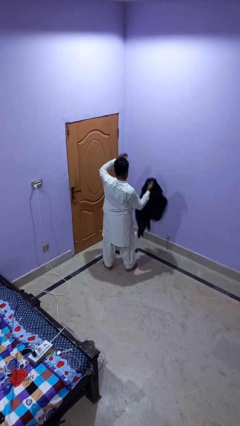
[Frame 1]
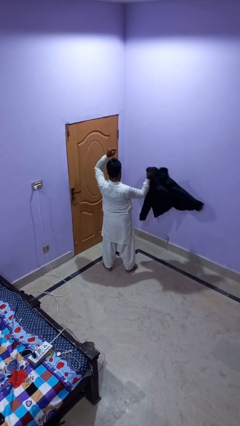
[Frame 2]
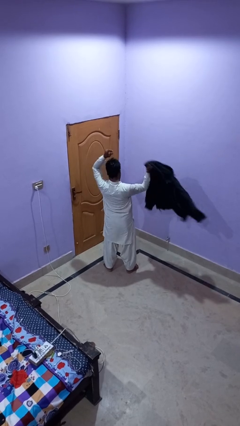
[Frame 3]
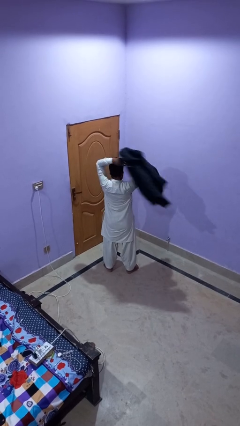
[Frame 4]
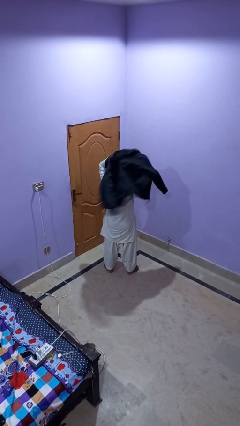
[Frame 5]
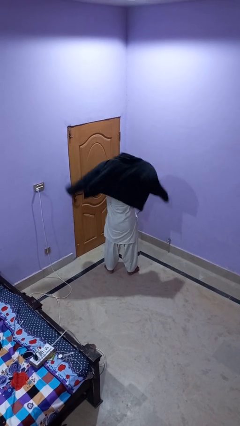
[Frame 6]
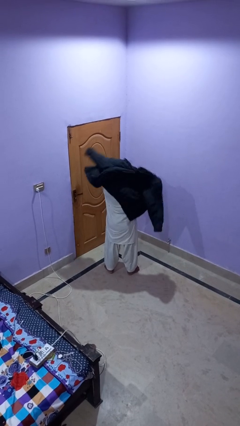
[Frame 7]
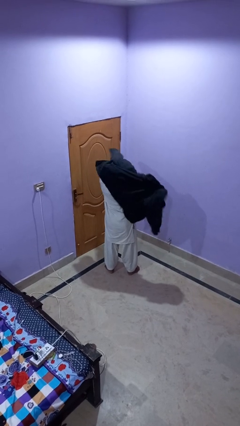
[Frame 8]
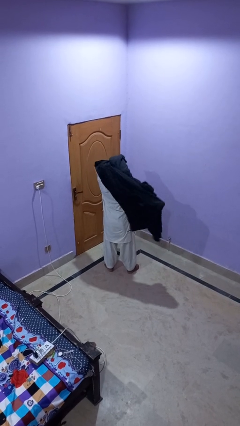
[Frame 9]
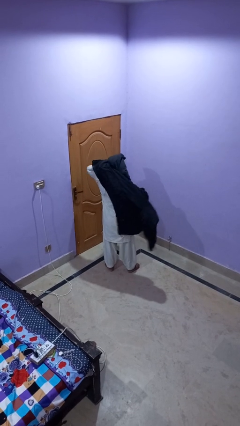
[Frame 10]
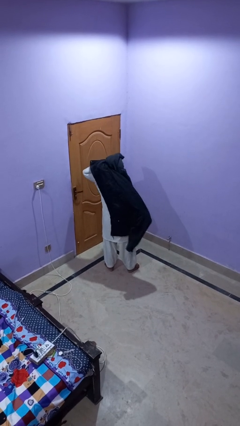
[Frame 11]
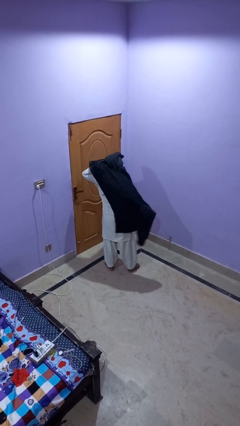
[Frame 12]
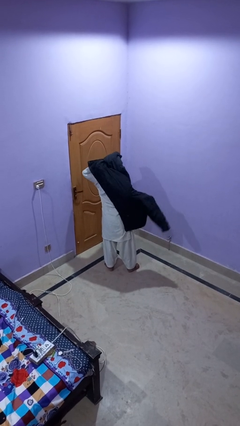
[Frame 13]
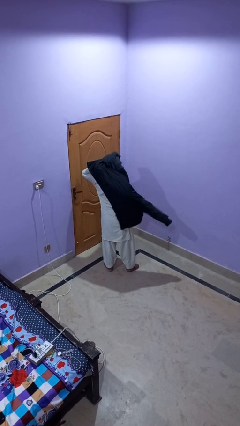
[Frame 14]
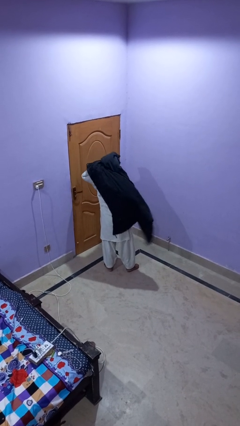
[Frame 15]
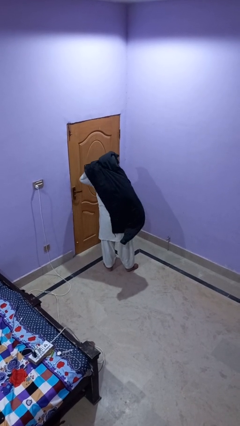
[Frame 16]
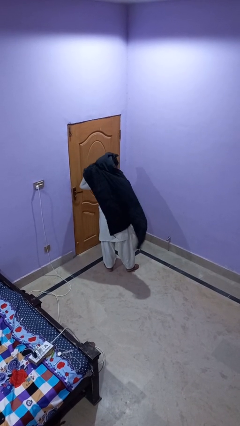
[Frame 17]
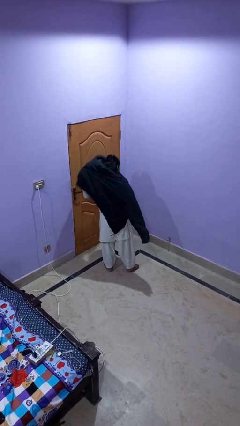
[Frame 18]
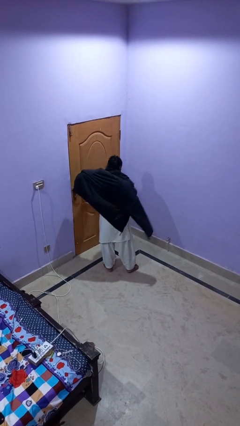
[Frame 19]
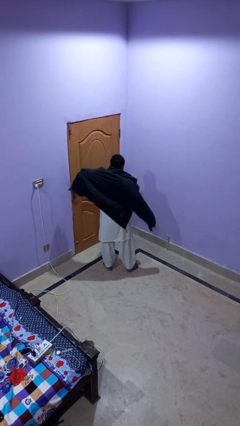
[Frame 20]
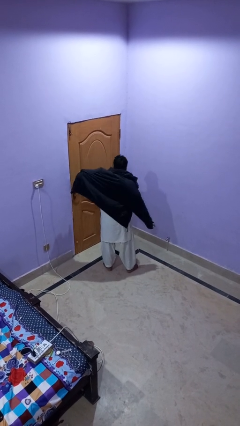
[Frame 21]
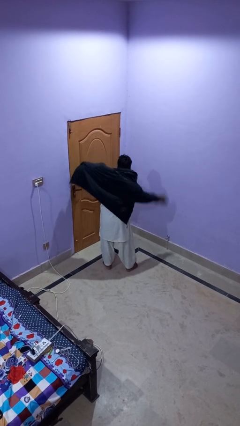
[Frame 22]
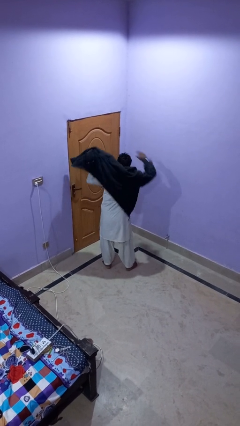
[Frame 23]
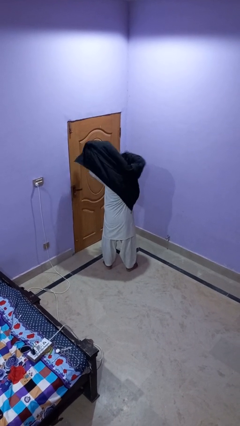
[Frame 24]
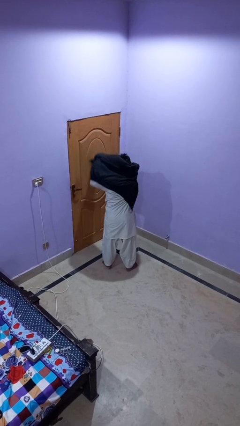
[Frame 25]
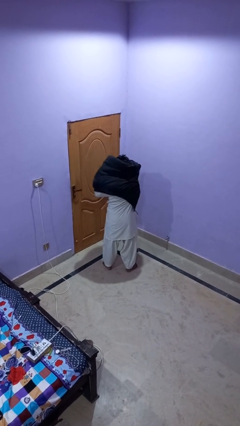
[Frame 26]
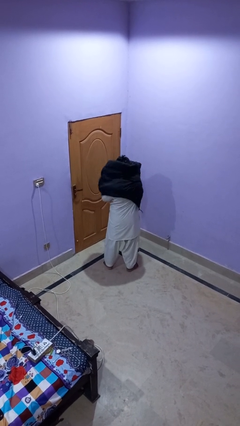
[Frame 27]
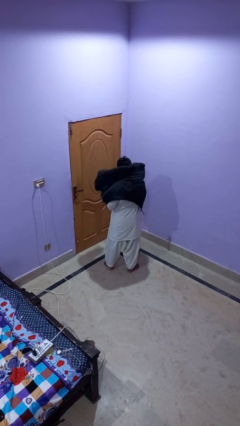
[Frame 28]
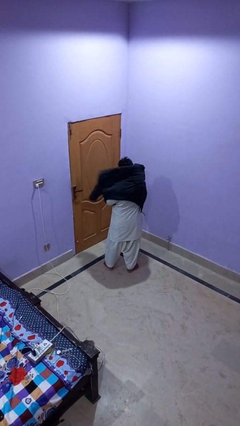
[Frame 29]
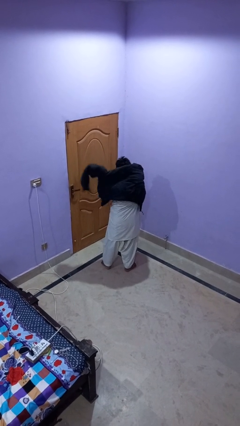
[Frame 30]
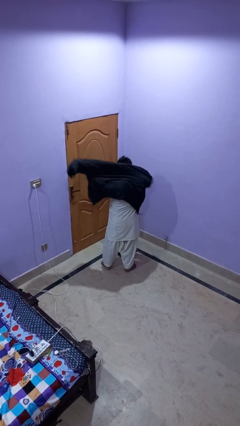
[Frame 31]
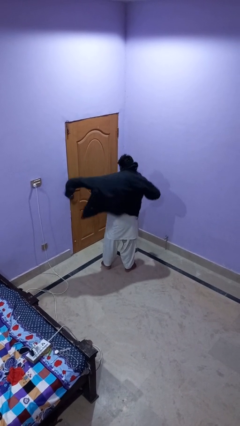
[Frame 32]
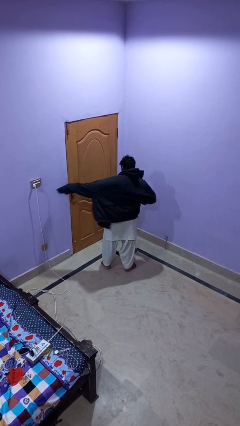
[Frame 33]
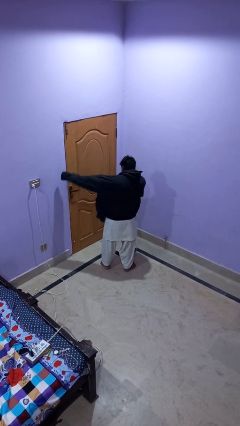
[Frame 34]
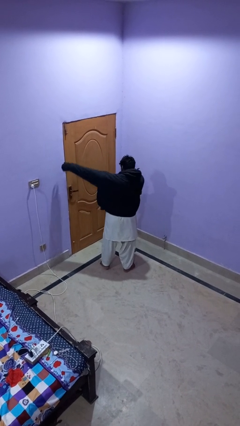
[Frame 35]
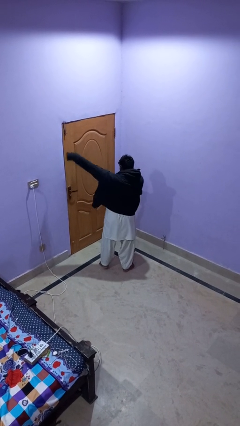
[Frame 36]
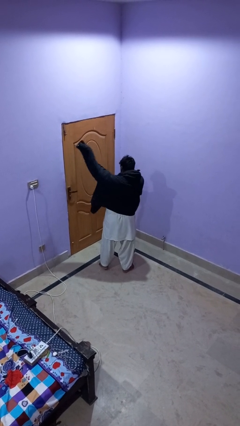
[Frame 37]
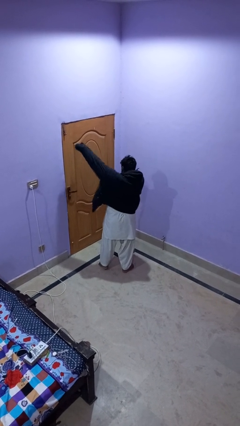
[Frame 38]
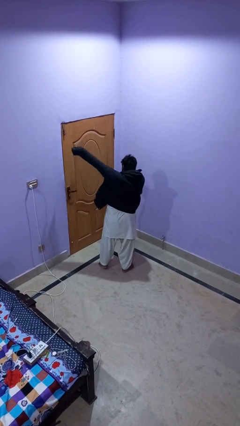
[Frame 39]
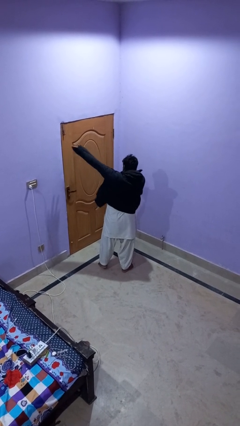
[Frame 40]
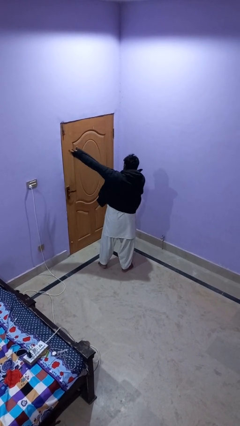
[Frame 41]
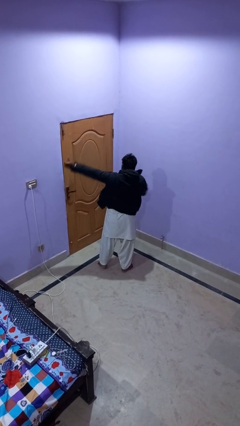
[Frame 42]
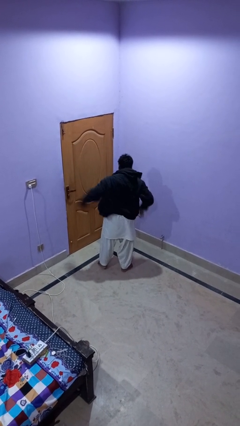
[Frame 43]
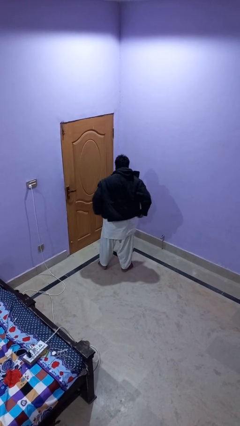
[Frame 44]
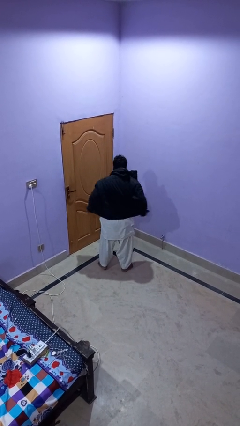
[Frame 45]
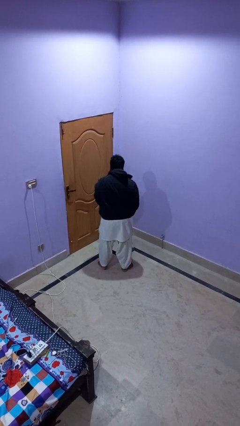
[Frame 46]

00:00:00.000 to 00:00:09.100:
person puts on jacket

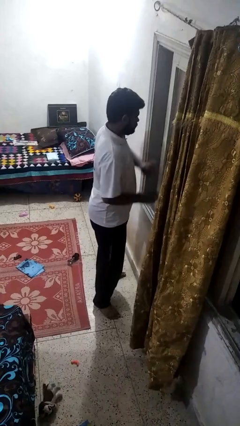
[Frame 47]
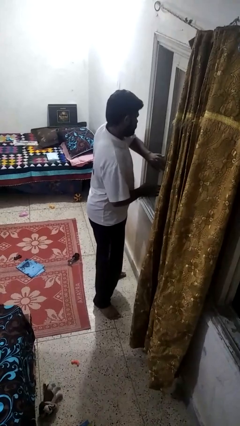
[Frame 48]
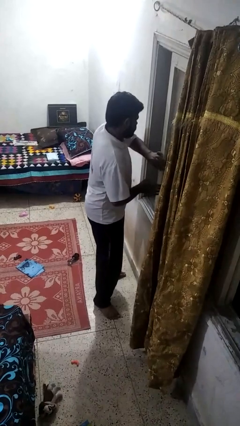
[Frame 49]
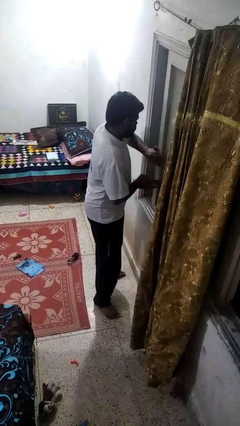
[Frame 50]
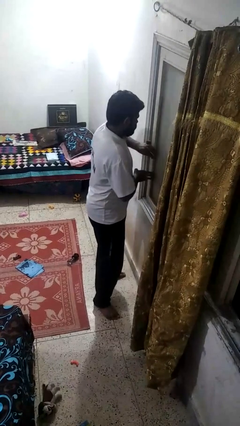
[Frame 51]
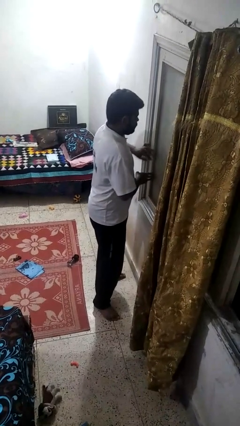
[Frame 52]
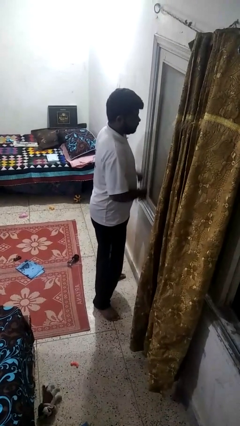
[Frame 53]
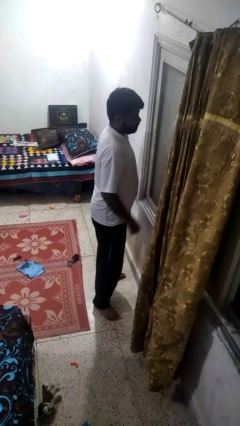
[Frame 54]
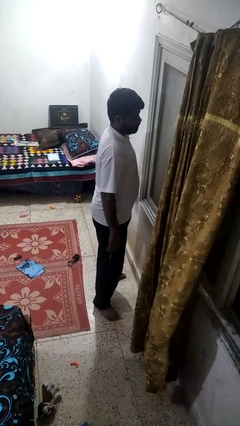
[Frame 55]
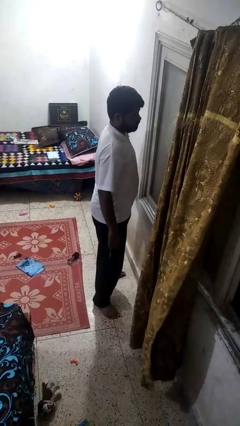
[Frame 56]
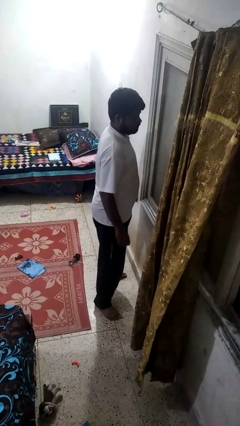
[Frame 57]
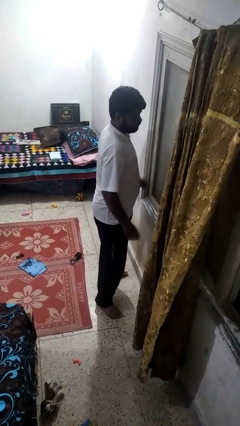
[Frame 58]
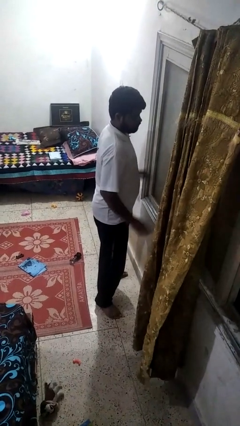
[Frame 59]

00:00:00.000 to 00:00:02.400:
person closes sliding door

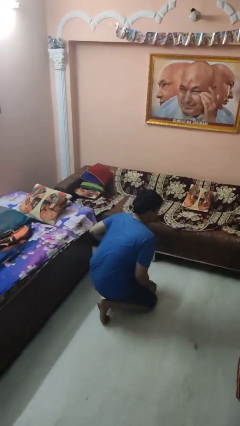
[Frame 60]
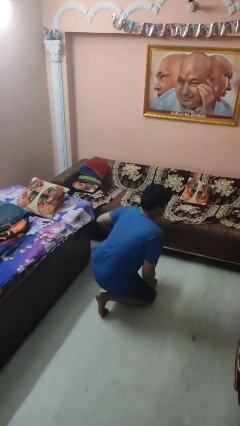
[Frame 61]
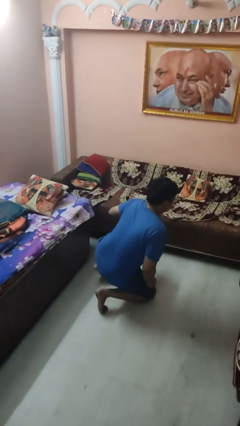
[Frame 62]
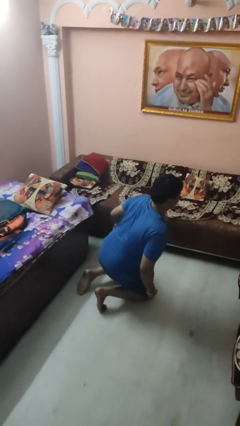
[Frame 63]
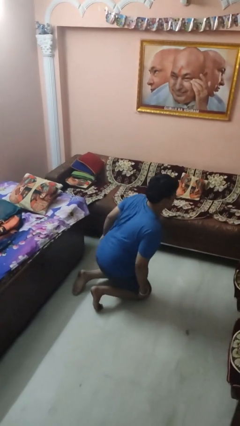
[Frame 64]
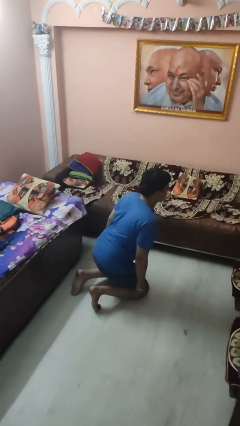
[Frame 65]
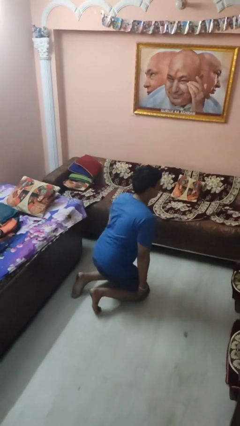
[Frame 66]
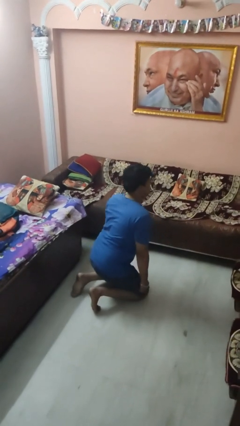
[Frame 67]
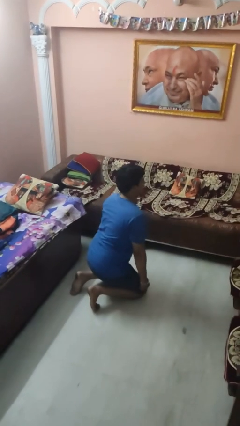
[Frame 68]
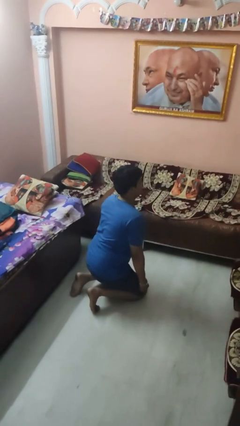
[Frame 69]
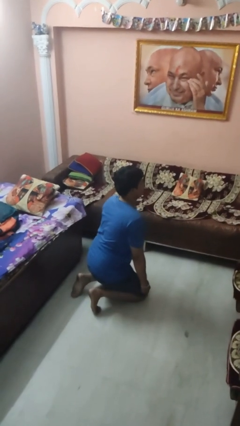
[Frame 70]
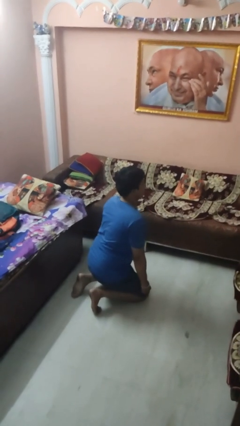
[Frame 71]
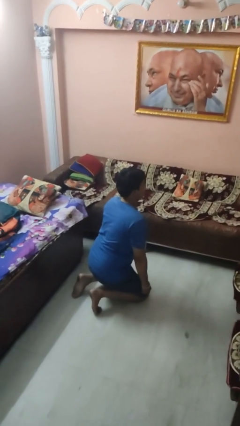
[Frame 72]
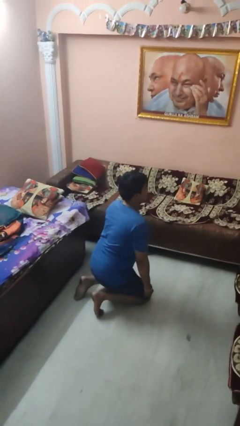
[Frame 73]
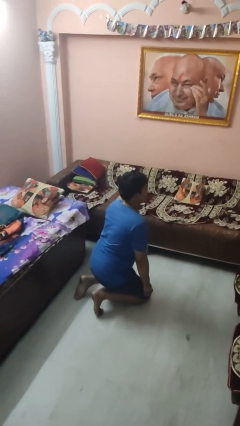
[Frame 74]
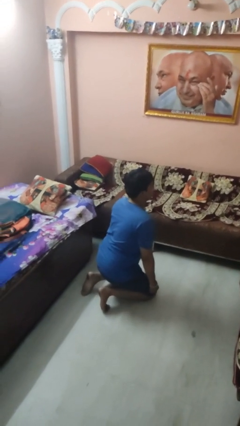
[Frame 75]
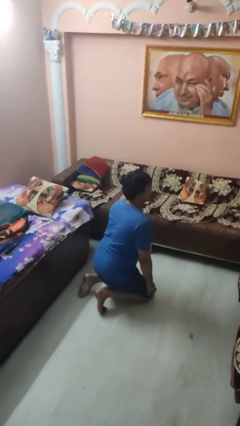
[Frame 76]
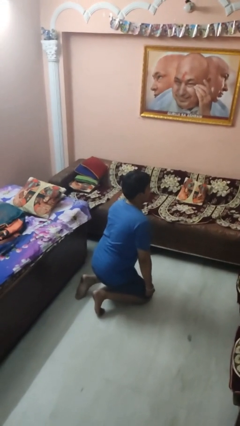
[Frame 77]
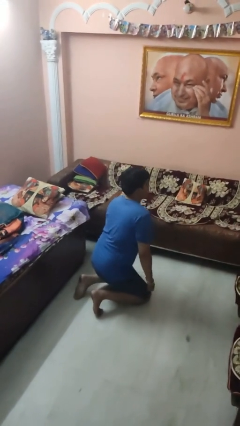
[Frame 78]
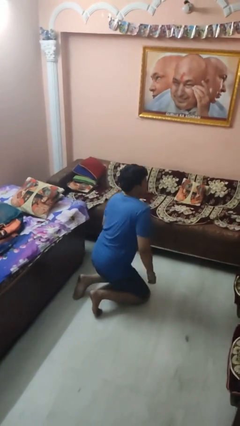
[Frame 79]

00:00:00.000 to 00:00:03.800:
person kneels

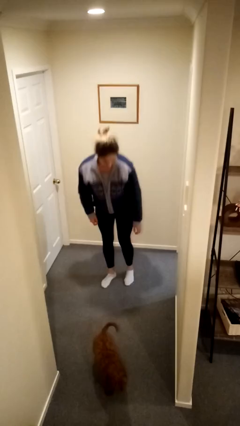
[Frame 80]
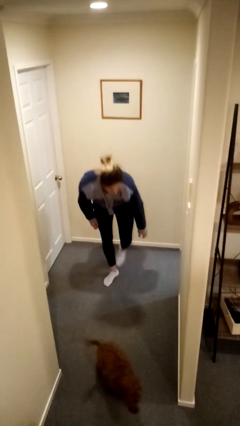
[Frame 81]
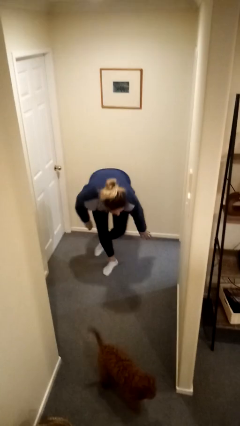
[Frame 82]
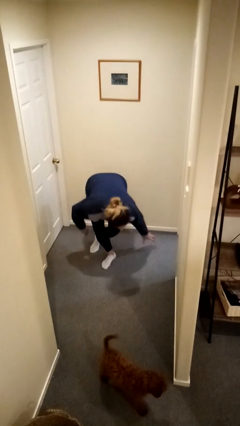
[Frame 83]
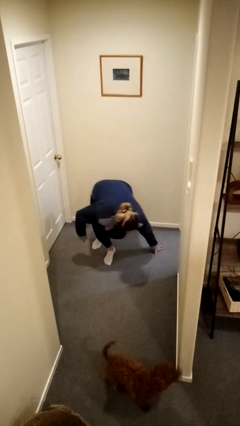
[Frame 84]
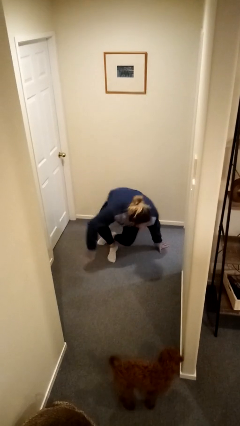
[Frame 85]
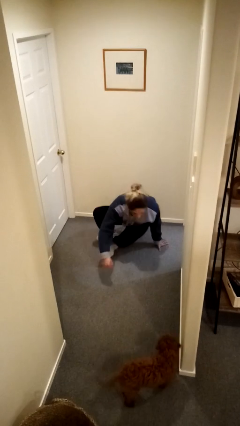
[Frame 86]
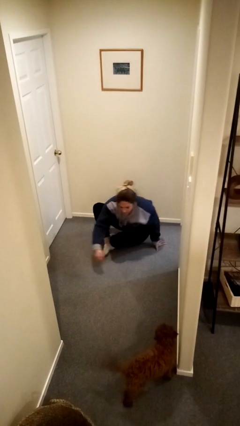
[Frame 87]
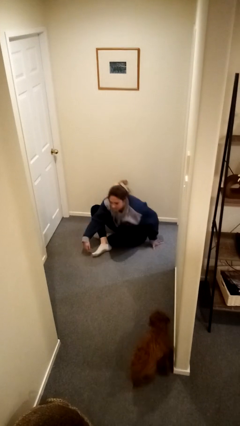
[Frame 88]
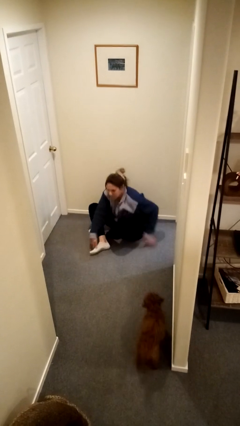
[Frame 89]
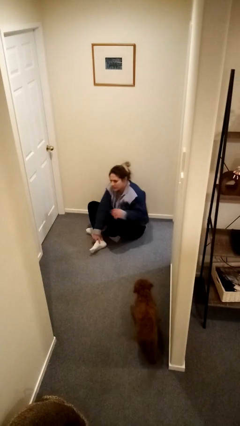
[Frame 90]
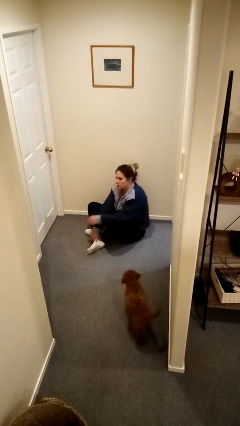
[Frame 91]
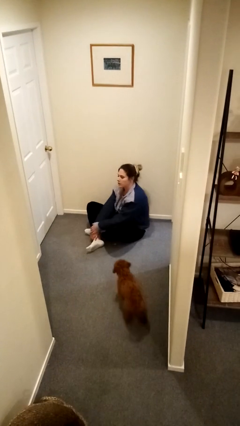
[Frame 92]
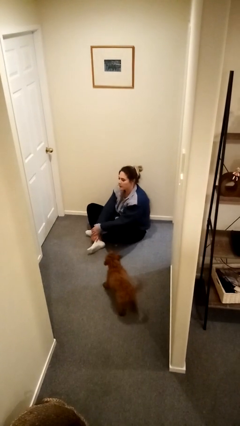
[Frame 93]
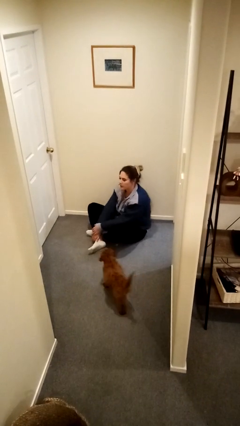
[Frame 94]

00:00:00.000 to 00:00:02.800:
person sits crisscross

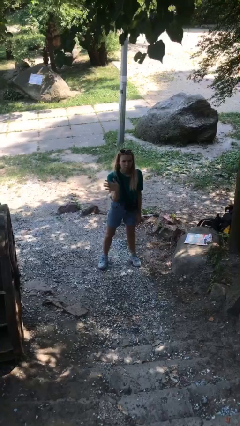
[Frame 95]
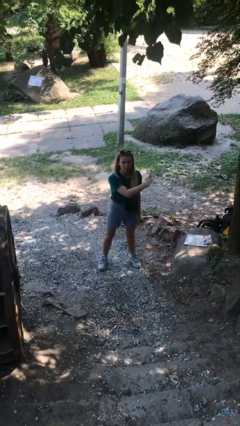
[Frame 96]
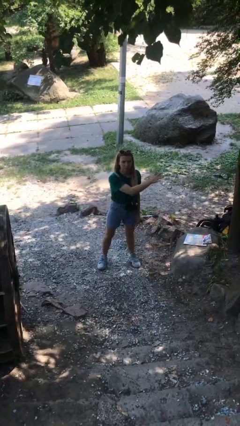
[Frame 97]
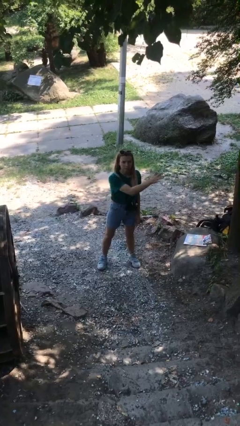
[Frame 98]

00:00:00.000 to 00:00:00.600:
person gestures swipe left
